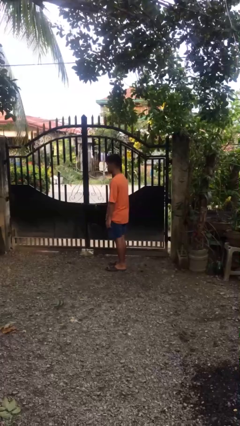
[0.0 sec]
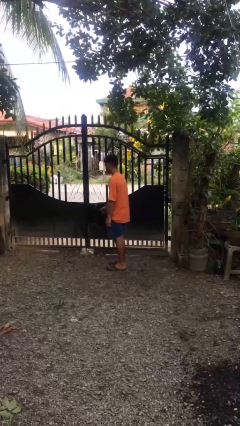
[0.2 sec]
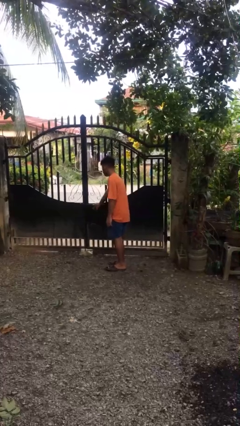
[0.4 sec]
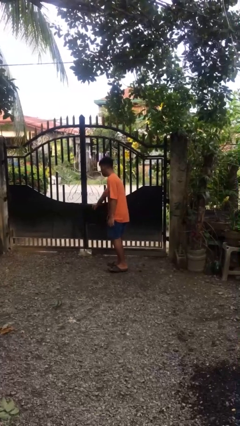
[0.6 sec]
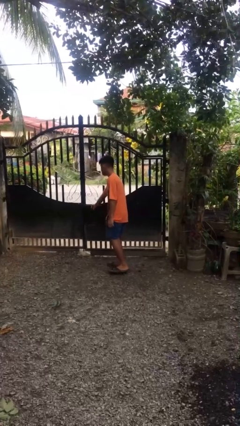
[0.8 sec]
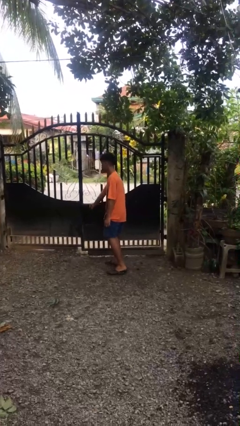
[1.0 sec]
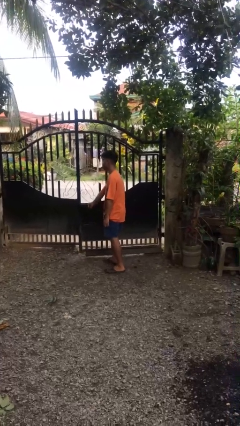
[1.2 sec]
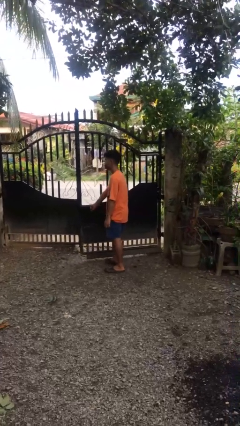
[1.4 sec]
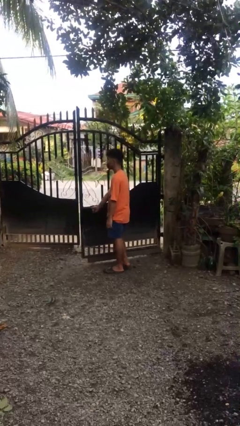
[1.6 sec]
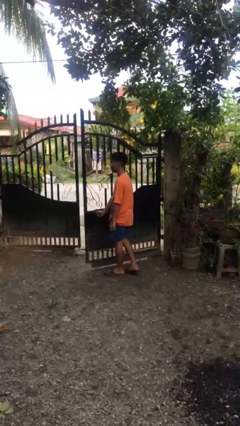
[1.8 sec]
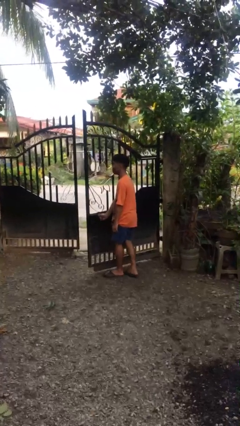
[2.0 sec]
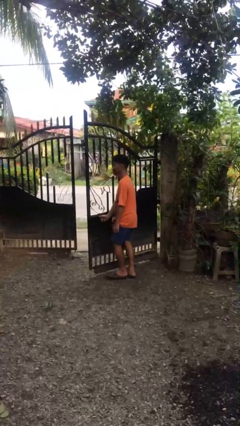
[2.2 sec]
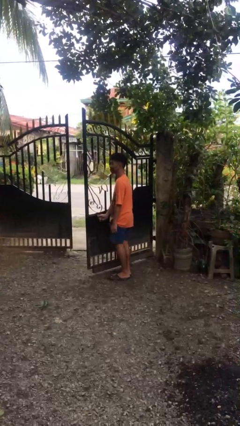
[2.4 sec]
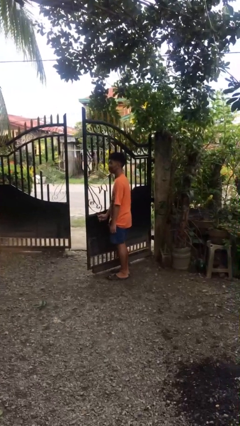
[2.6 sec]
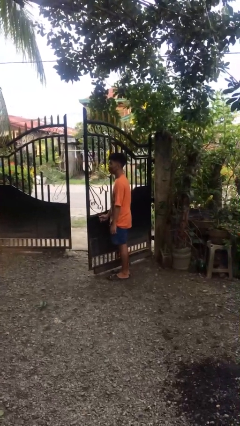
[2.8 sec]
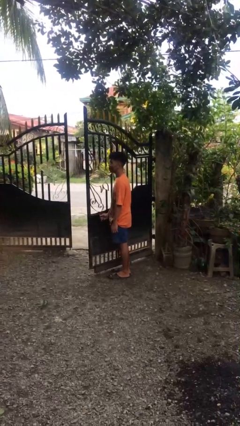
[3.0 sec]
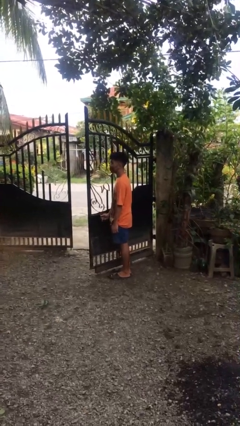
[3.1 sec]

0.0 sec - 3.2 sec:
person opens gate

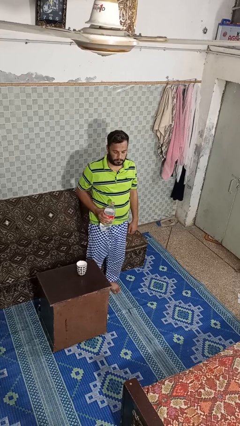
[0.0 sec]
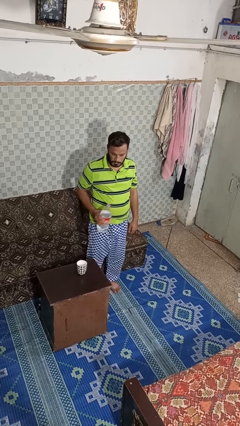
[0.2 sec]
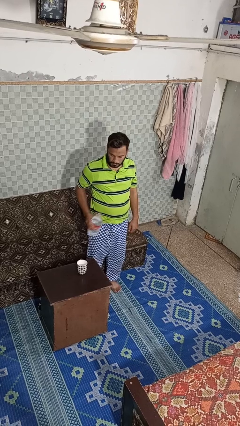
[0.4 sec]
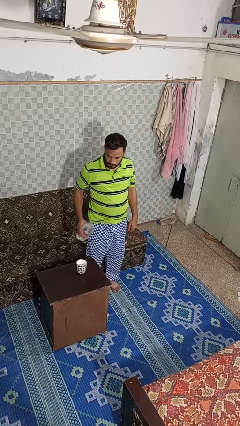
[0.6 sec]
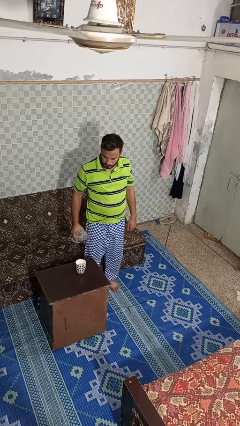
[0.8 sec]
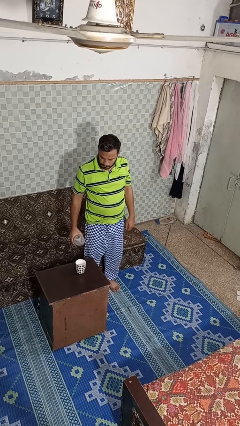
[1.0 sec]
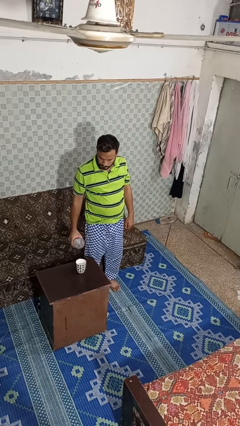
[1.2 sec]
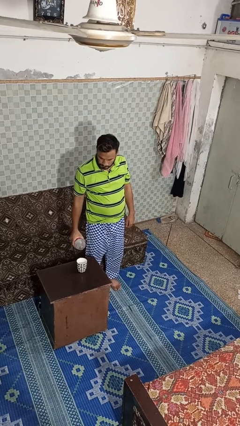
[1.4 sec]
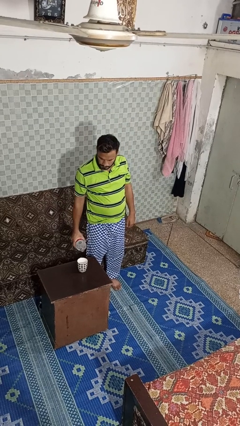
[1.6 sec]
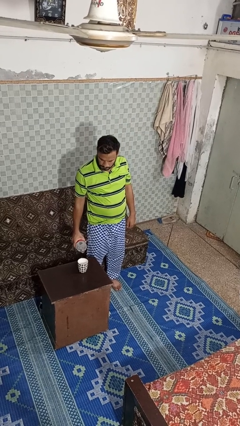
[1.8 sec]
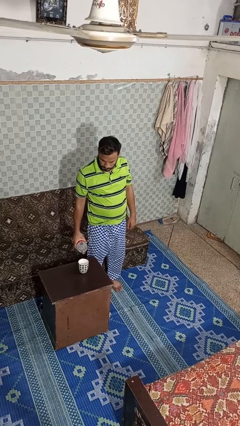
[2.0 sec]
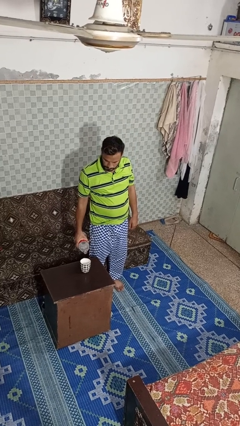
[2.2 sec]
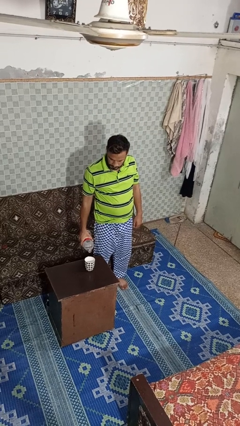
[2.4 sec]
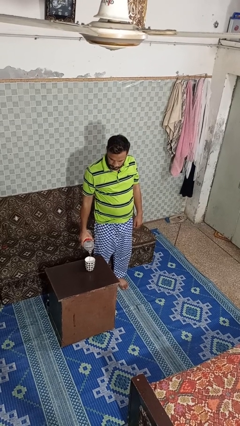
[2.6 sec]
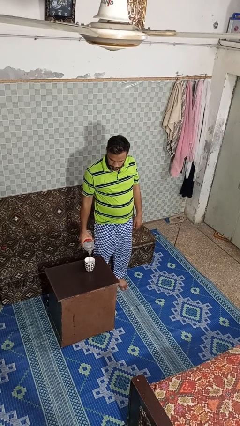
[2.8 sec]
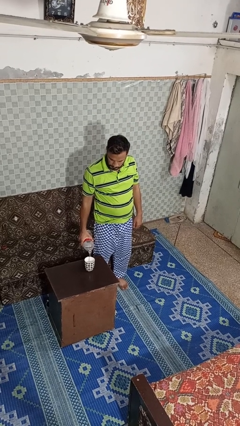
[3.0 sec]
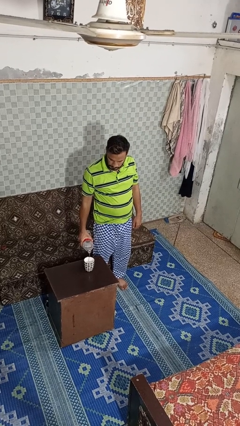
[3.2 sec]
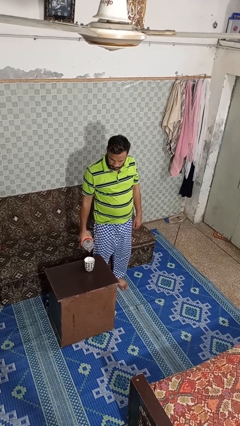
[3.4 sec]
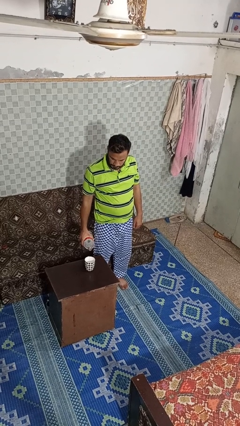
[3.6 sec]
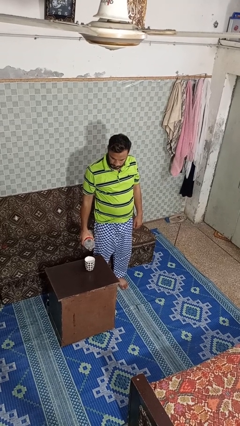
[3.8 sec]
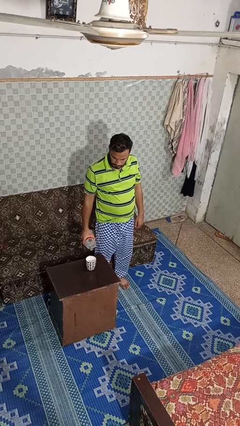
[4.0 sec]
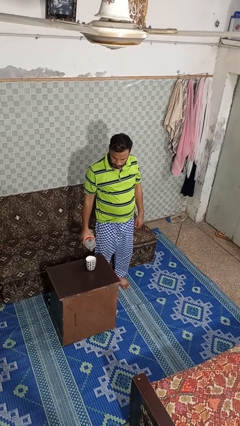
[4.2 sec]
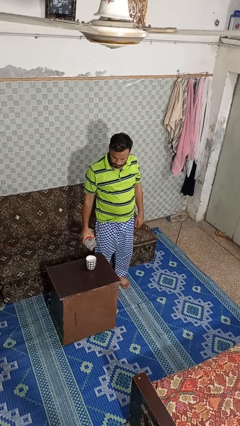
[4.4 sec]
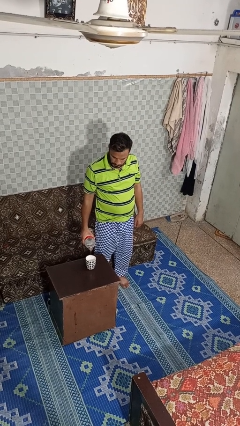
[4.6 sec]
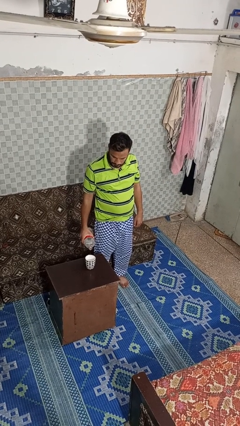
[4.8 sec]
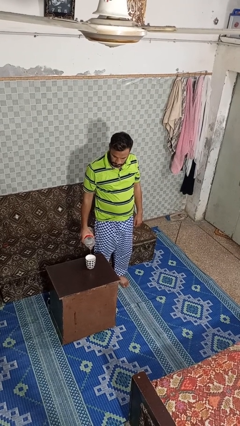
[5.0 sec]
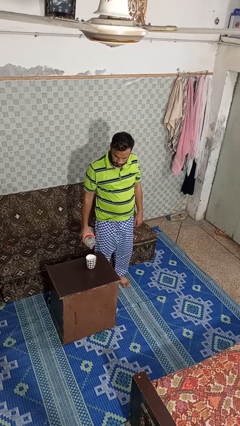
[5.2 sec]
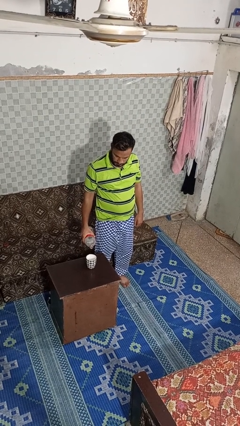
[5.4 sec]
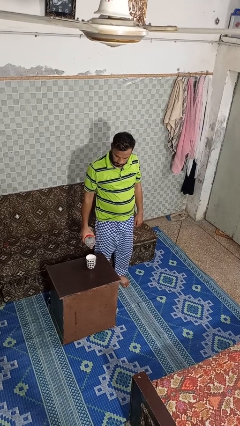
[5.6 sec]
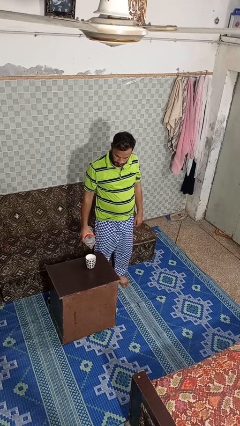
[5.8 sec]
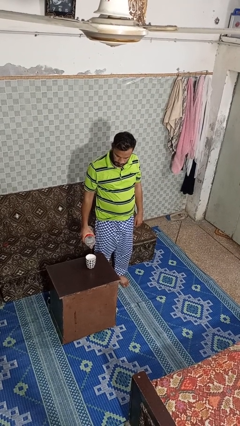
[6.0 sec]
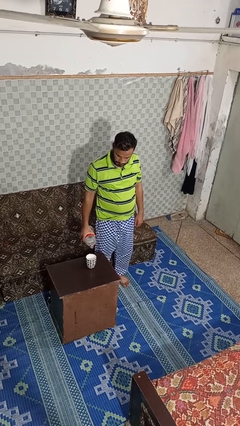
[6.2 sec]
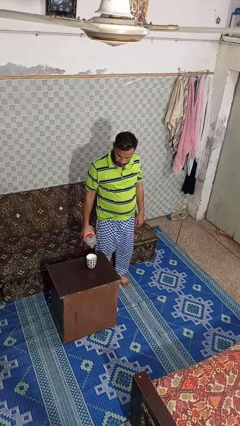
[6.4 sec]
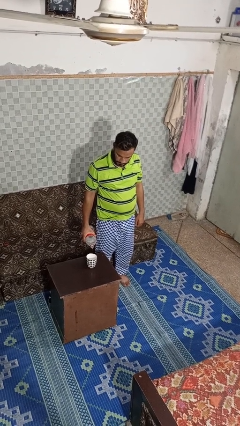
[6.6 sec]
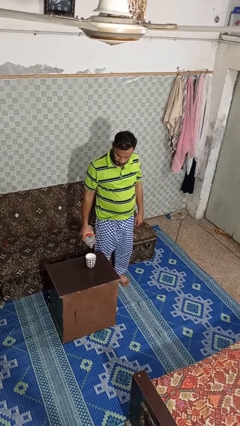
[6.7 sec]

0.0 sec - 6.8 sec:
person pours liquid into cup

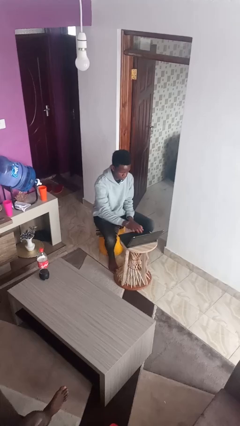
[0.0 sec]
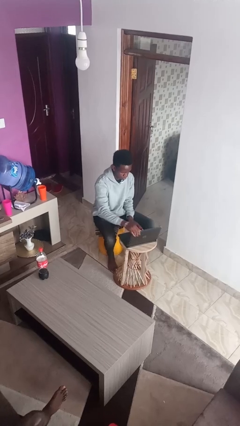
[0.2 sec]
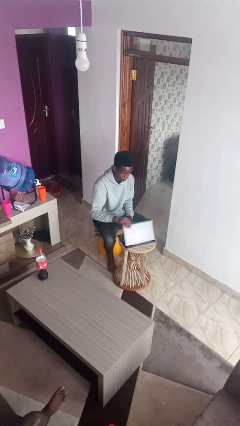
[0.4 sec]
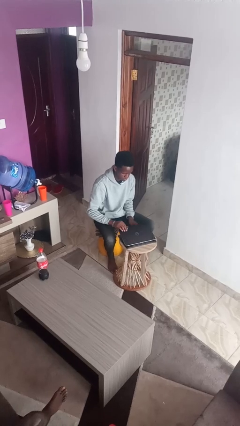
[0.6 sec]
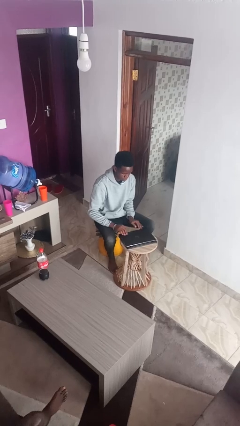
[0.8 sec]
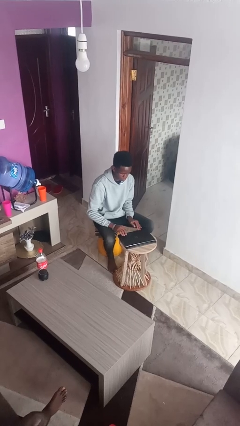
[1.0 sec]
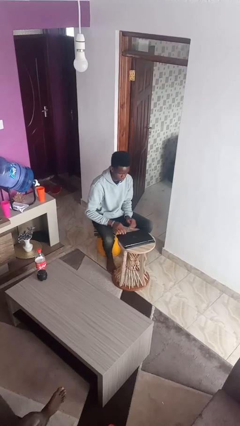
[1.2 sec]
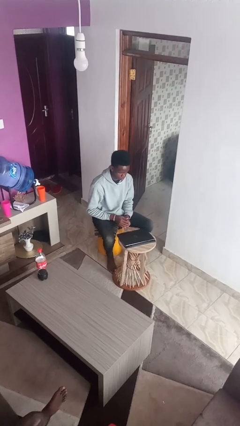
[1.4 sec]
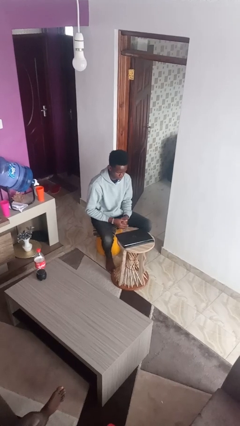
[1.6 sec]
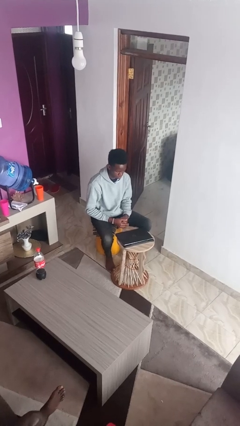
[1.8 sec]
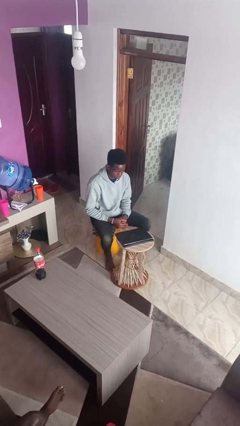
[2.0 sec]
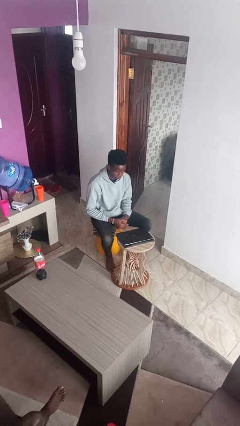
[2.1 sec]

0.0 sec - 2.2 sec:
person closes laptop

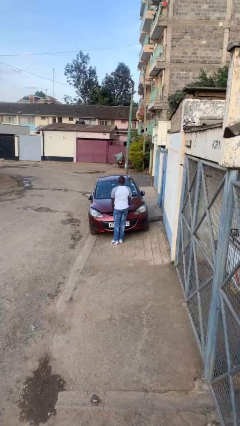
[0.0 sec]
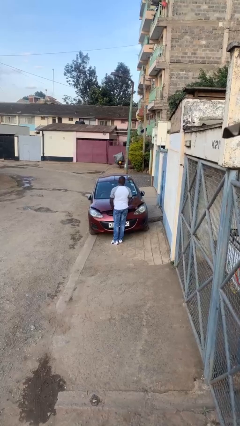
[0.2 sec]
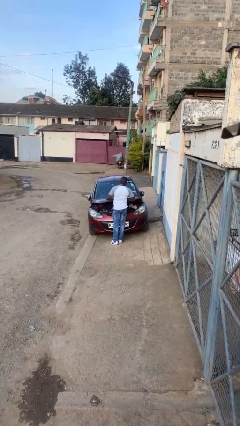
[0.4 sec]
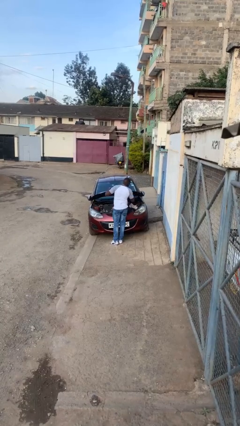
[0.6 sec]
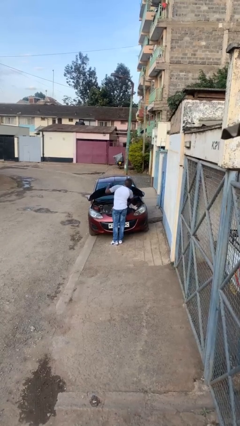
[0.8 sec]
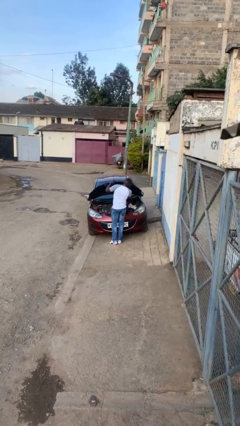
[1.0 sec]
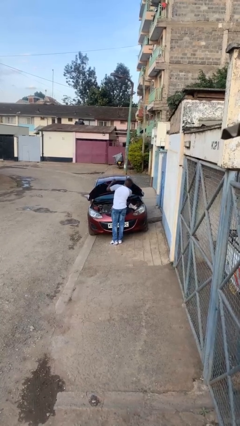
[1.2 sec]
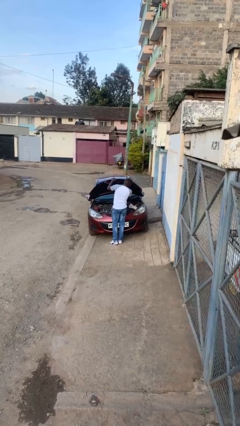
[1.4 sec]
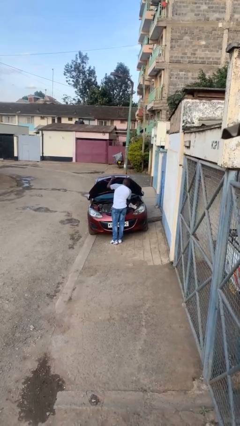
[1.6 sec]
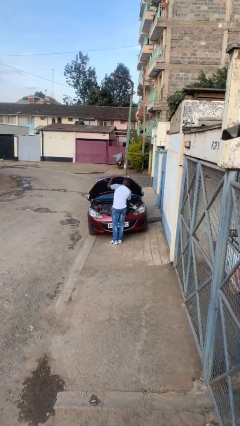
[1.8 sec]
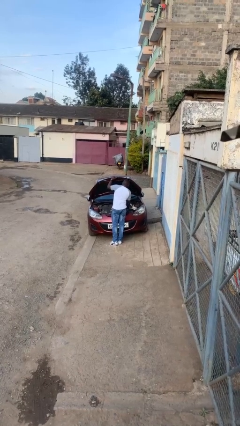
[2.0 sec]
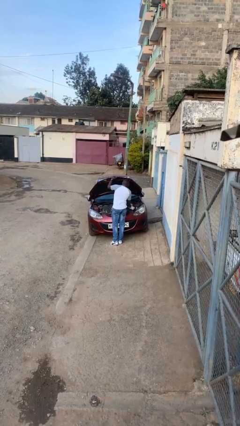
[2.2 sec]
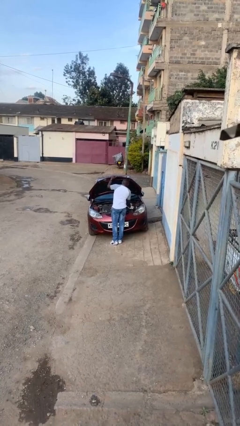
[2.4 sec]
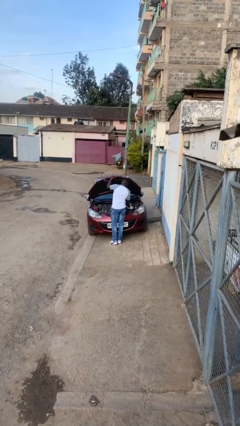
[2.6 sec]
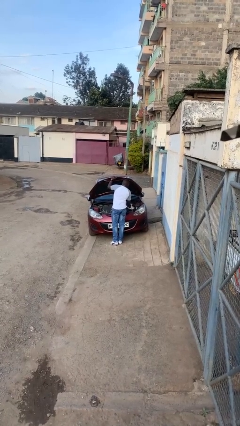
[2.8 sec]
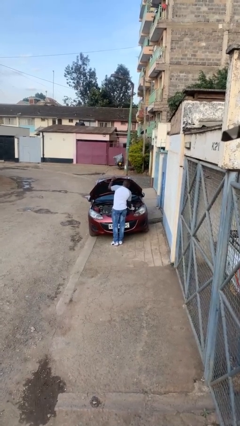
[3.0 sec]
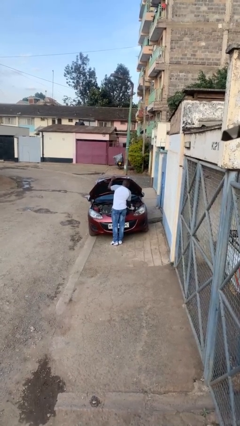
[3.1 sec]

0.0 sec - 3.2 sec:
person opens car hood

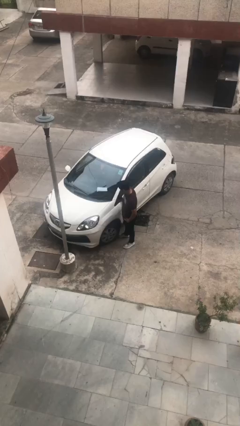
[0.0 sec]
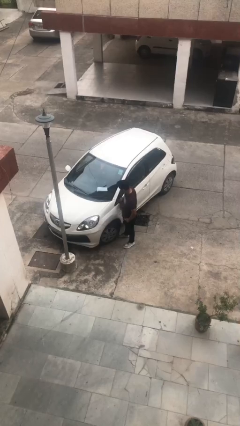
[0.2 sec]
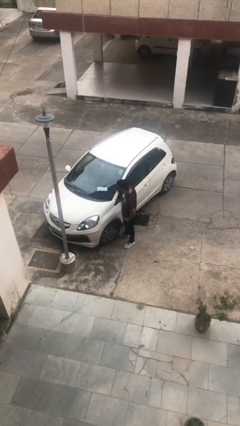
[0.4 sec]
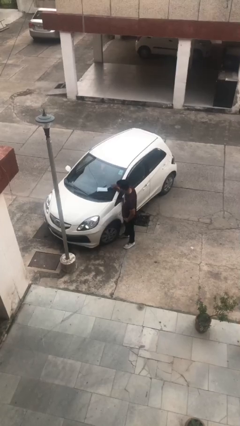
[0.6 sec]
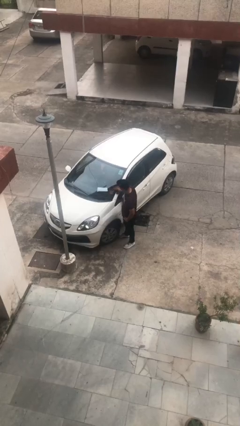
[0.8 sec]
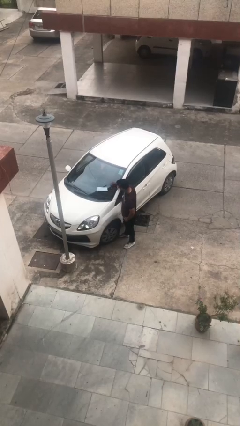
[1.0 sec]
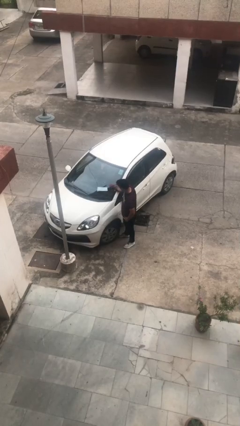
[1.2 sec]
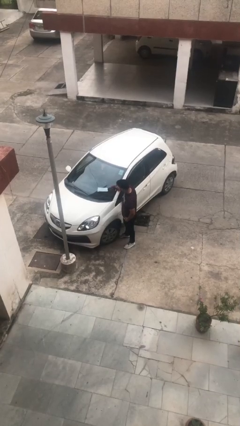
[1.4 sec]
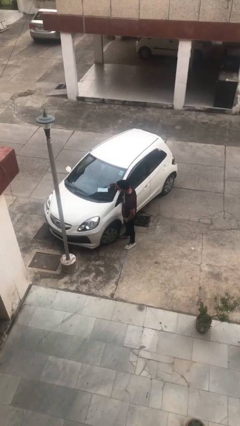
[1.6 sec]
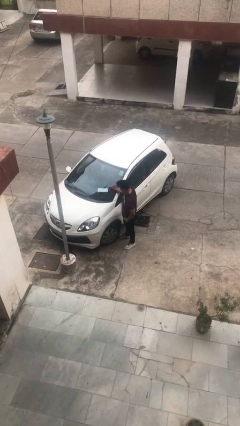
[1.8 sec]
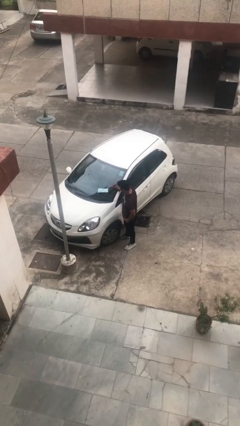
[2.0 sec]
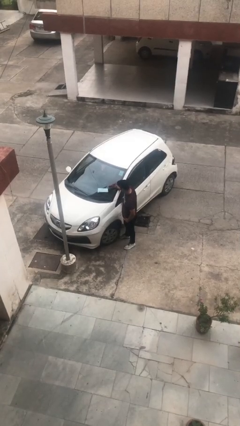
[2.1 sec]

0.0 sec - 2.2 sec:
person polishes car with rag
